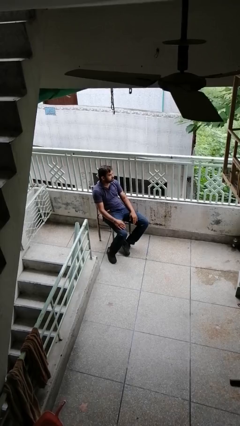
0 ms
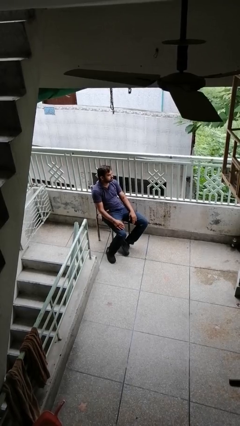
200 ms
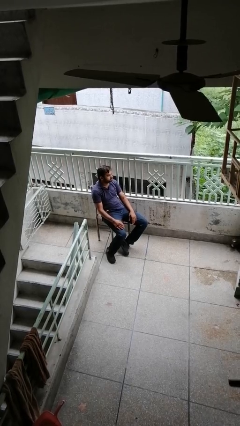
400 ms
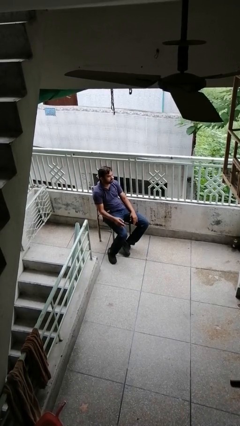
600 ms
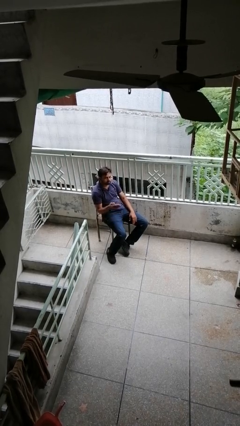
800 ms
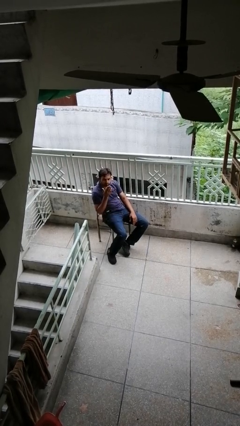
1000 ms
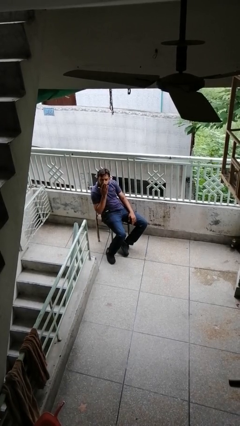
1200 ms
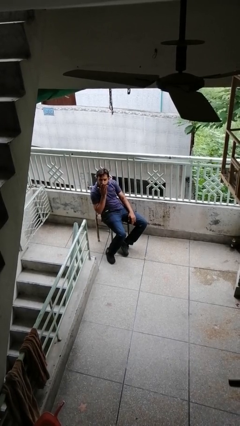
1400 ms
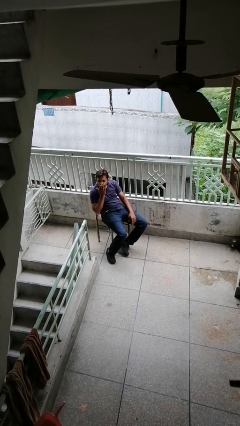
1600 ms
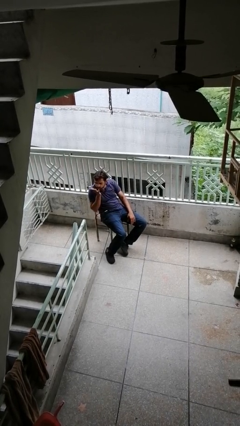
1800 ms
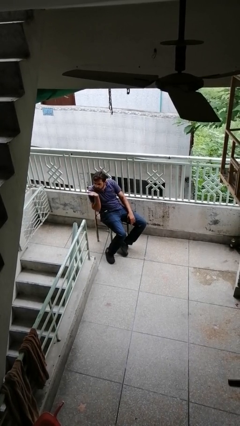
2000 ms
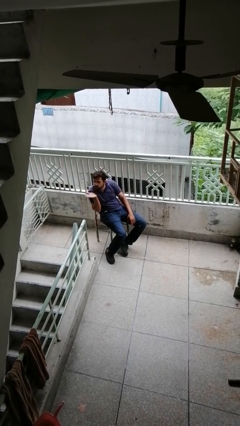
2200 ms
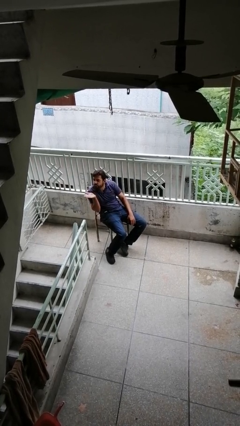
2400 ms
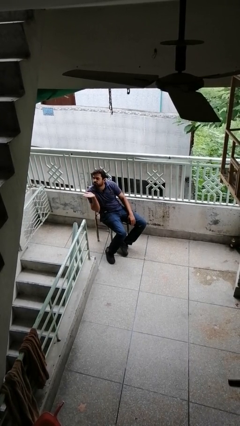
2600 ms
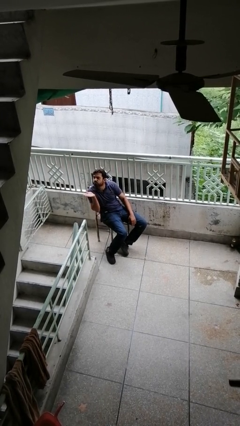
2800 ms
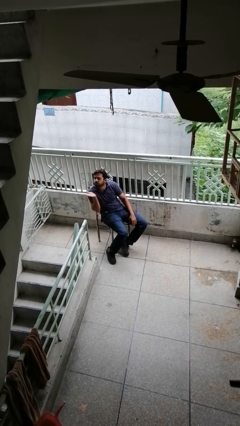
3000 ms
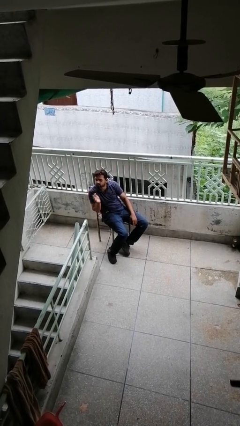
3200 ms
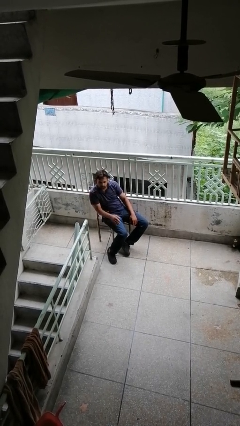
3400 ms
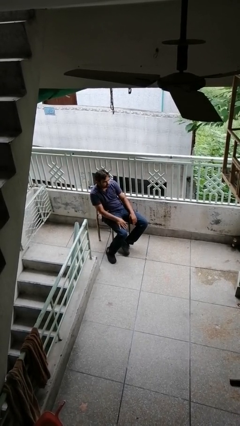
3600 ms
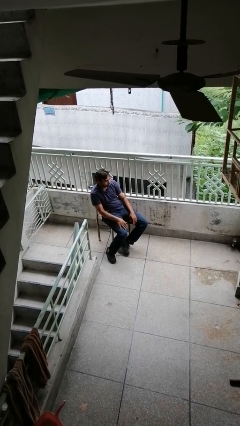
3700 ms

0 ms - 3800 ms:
person gestures blow kiss

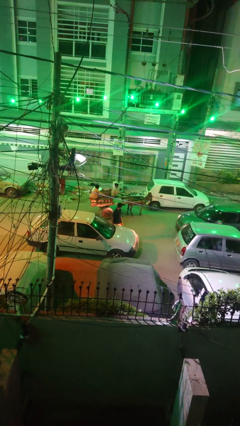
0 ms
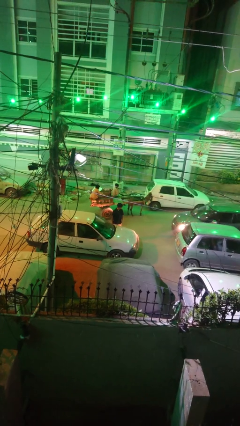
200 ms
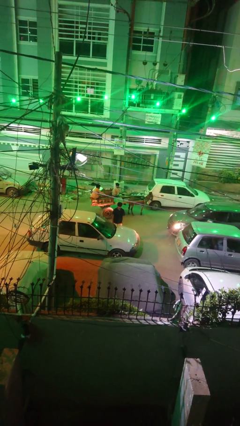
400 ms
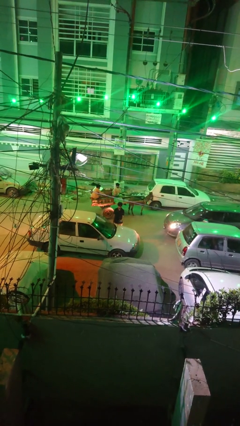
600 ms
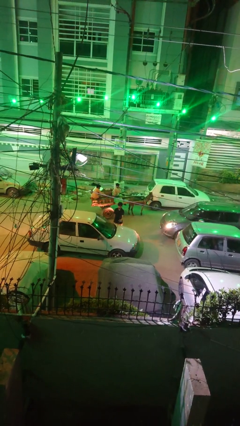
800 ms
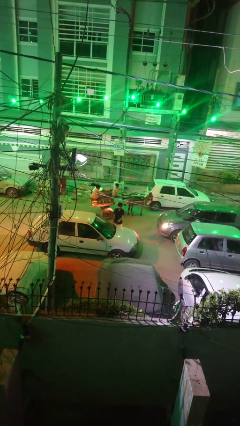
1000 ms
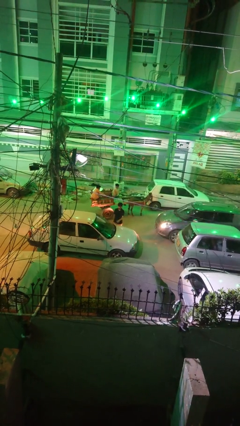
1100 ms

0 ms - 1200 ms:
person flips up car wipers

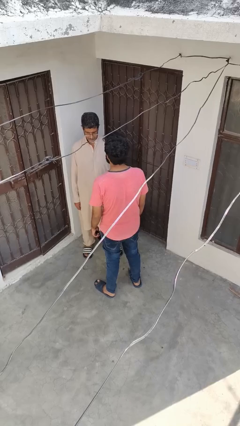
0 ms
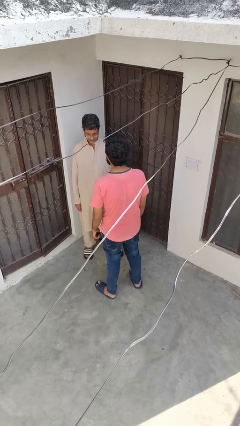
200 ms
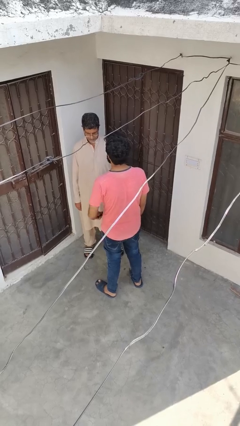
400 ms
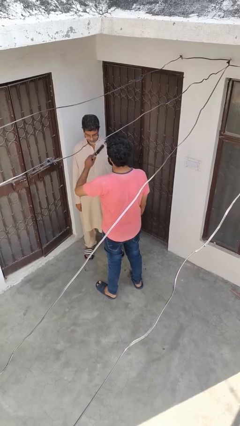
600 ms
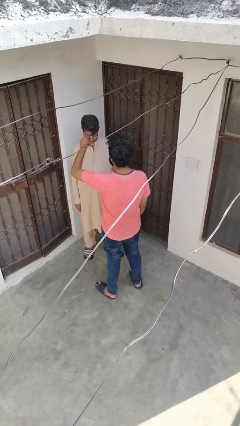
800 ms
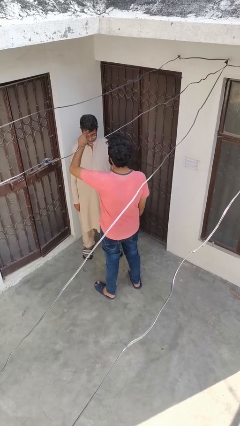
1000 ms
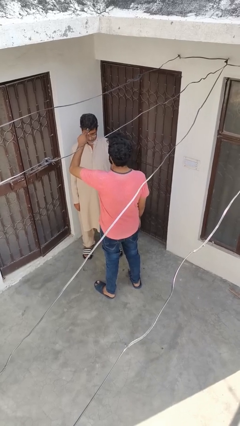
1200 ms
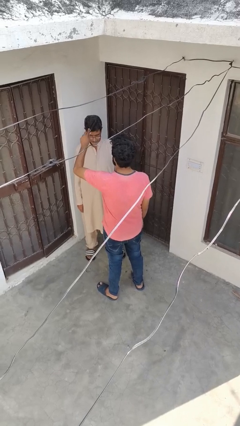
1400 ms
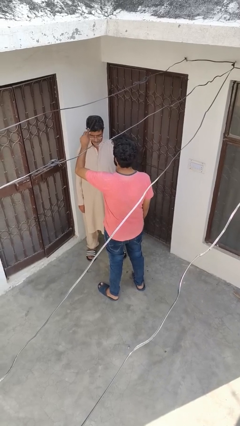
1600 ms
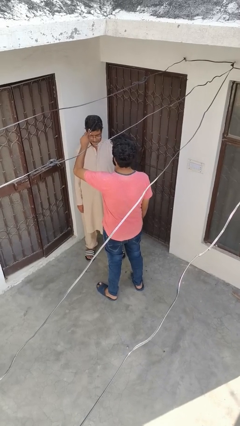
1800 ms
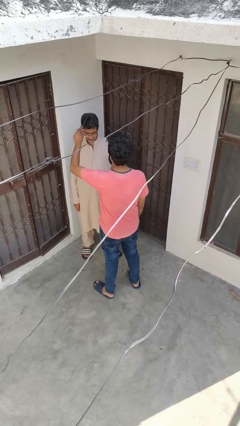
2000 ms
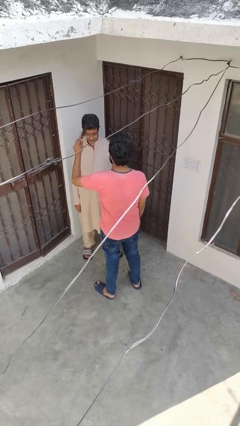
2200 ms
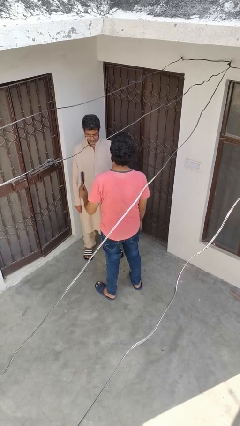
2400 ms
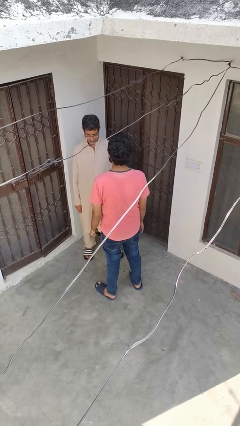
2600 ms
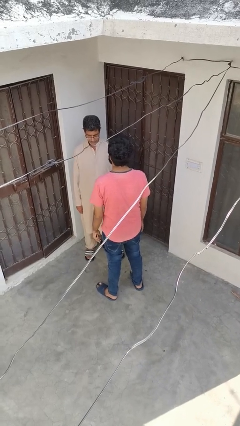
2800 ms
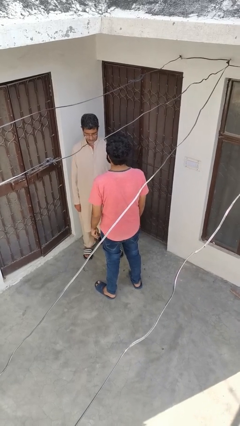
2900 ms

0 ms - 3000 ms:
person brushes hair of person

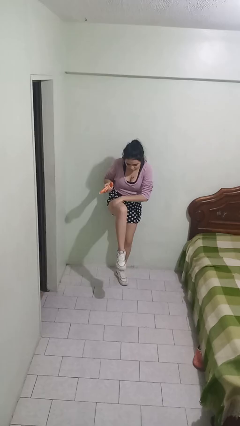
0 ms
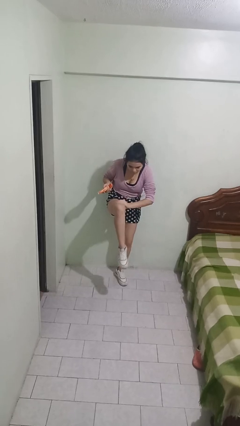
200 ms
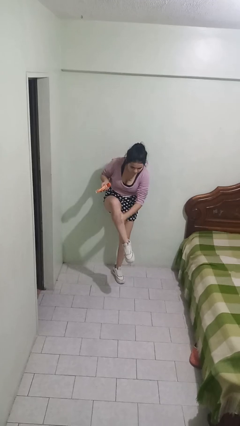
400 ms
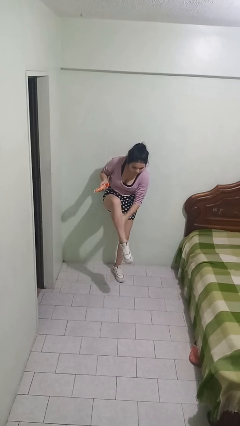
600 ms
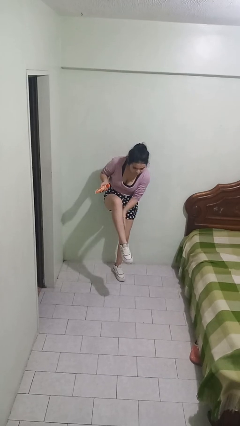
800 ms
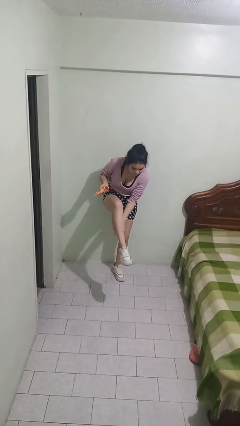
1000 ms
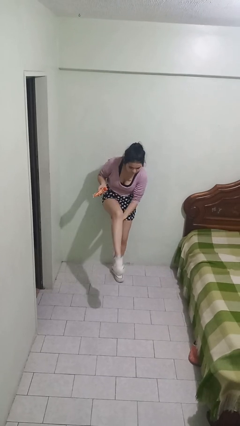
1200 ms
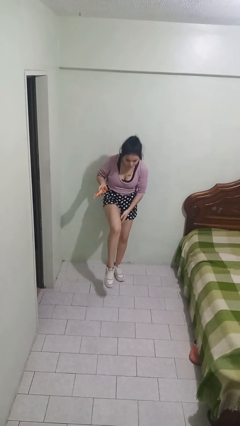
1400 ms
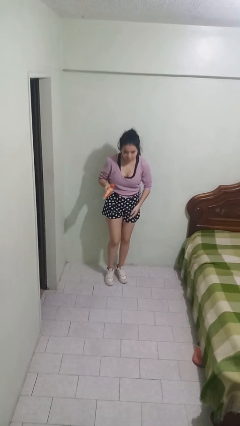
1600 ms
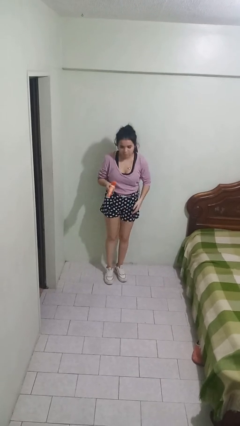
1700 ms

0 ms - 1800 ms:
person applies sunscreen

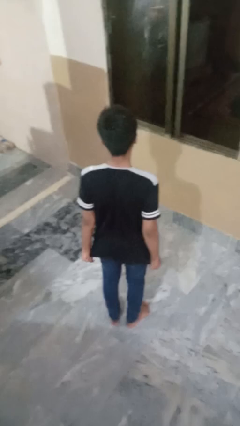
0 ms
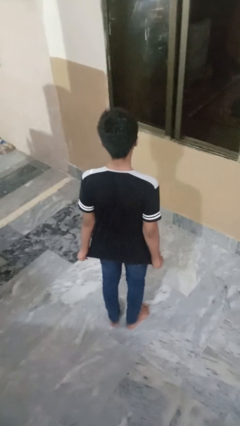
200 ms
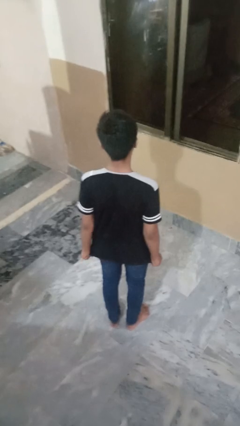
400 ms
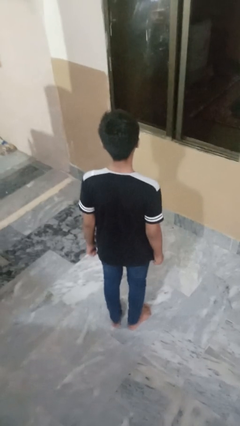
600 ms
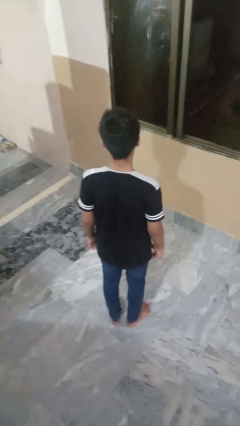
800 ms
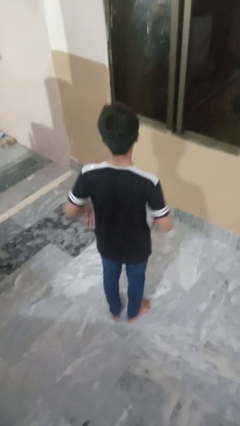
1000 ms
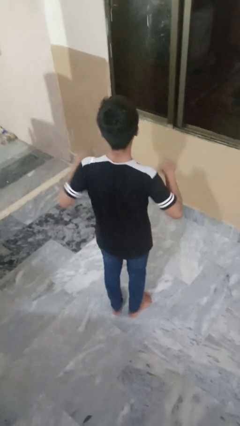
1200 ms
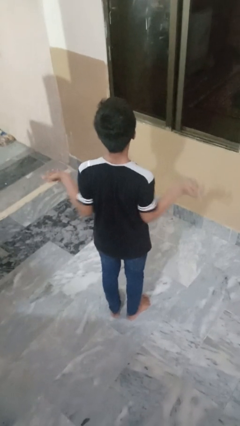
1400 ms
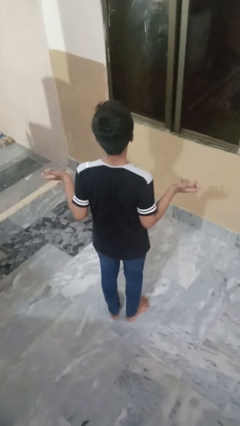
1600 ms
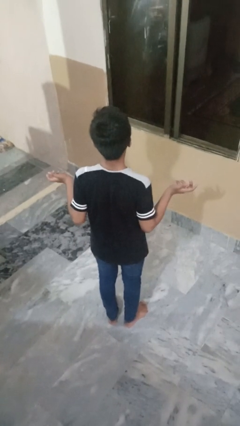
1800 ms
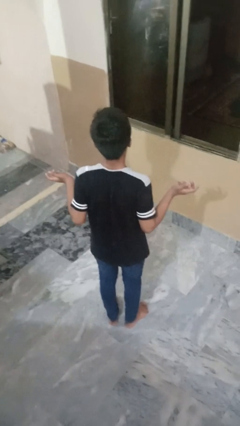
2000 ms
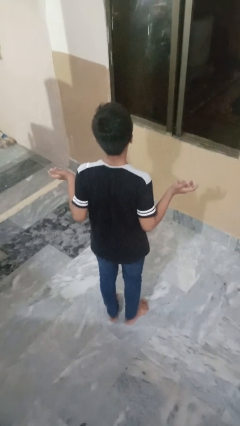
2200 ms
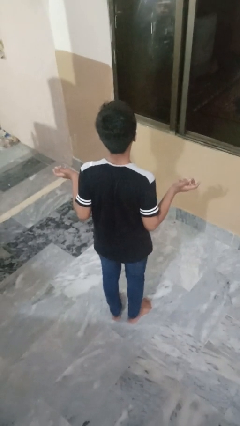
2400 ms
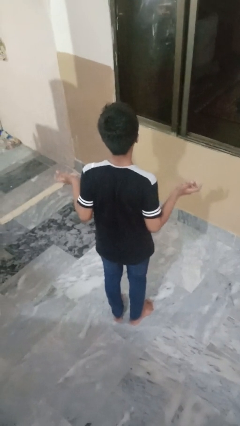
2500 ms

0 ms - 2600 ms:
person shrugs

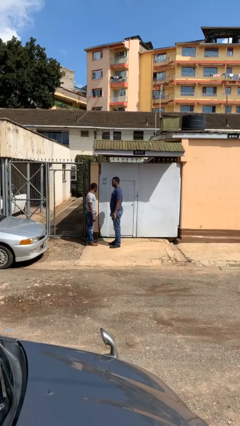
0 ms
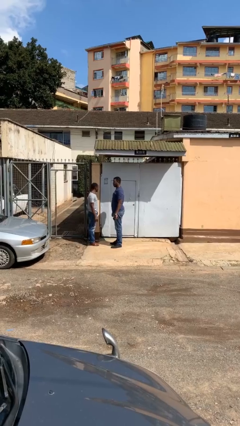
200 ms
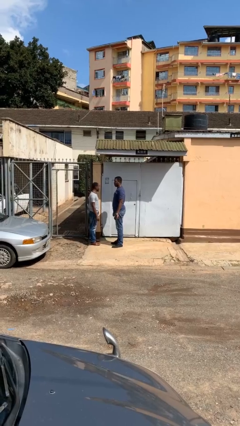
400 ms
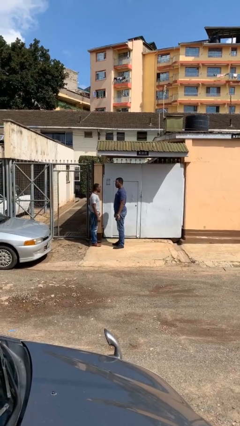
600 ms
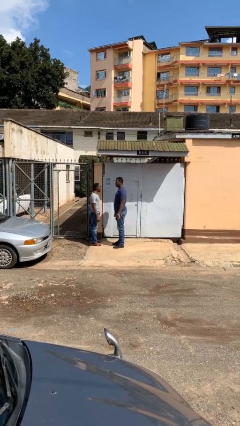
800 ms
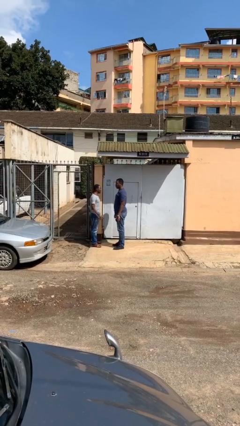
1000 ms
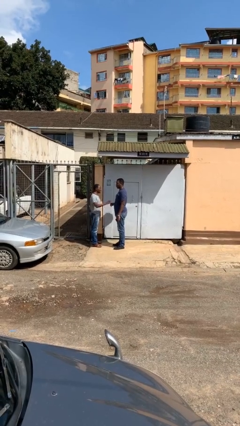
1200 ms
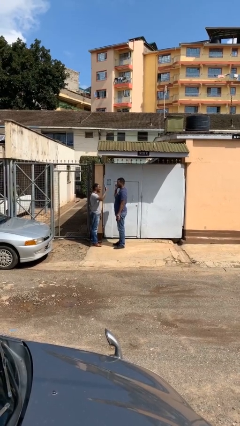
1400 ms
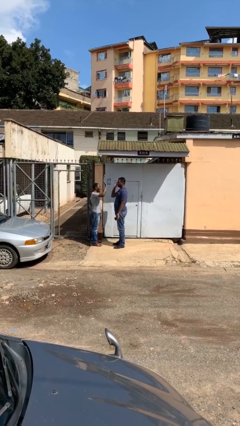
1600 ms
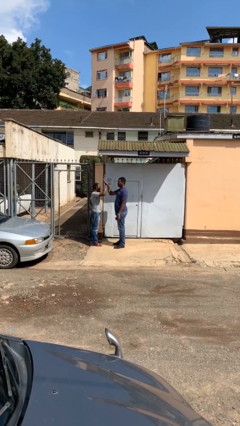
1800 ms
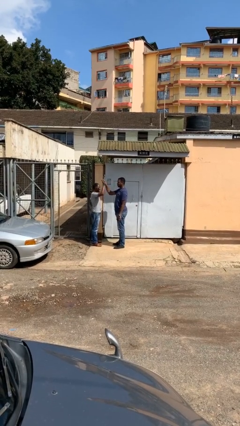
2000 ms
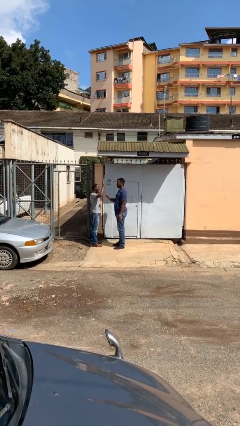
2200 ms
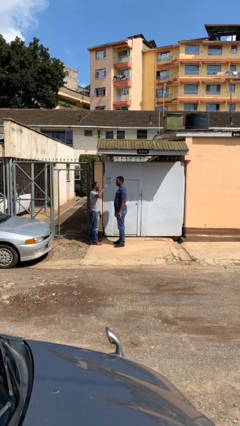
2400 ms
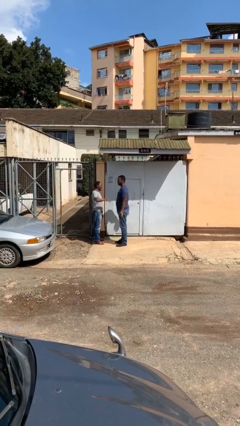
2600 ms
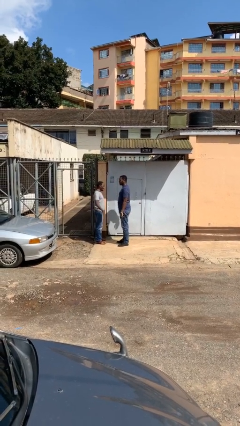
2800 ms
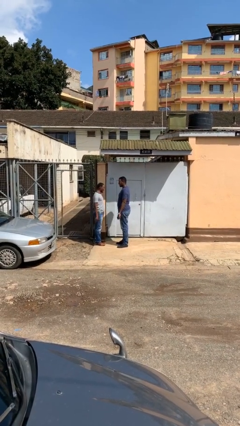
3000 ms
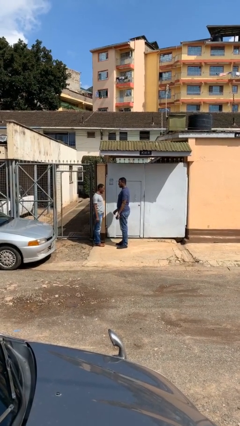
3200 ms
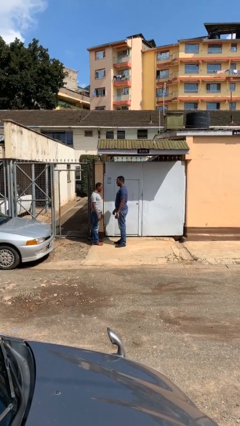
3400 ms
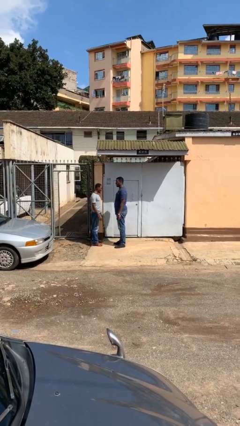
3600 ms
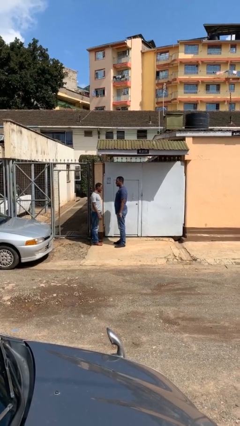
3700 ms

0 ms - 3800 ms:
person highfives hand

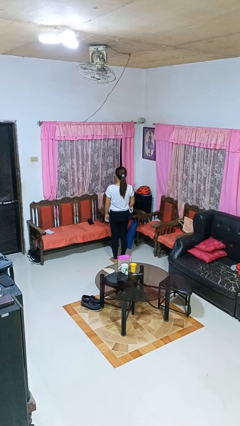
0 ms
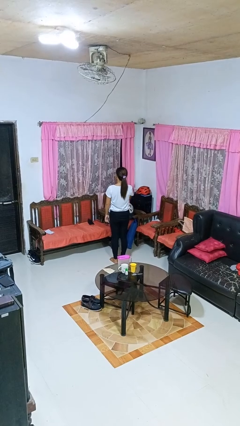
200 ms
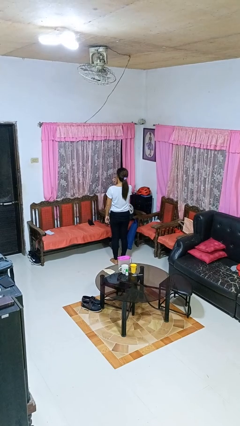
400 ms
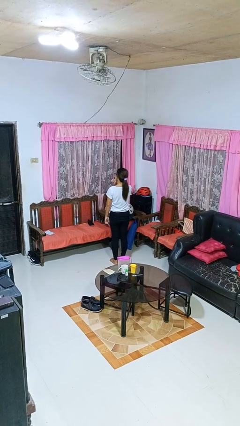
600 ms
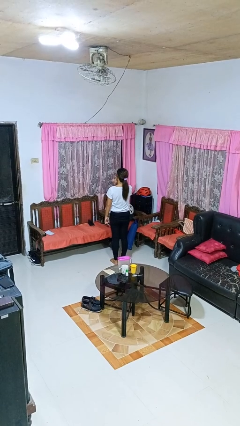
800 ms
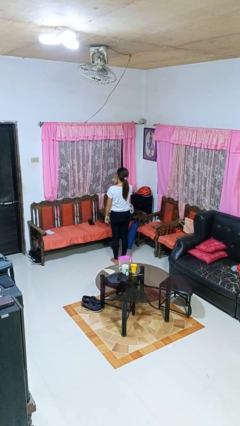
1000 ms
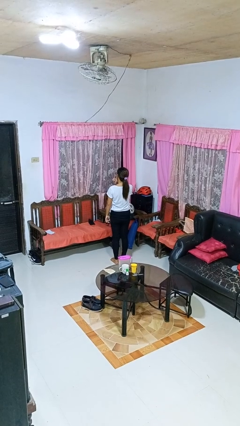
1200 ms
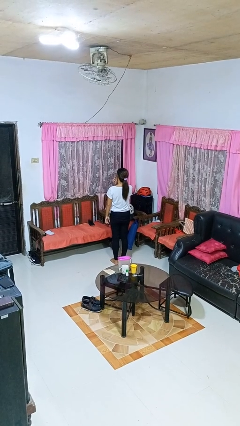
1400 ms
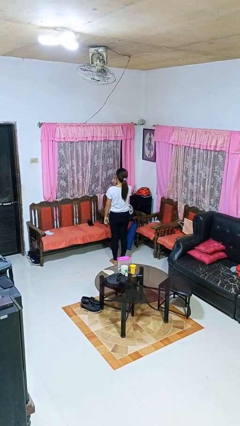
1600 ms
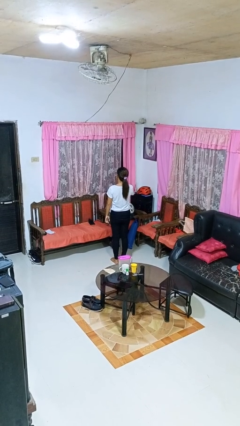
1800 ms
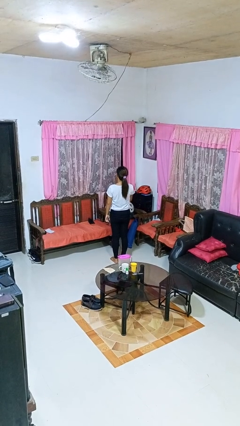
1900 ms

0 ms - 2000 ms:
person gestures be quiet
